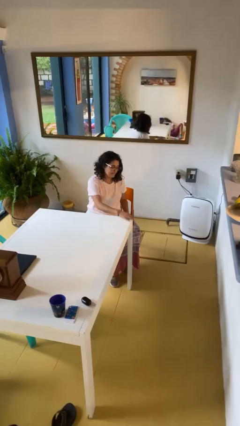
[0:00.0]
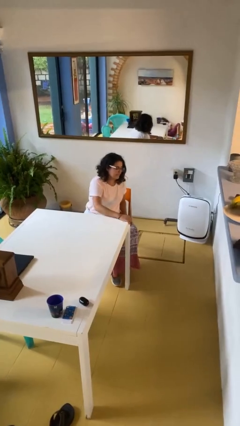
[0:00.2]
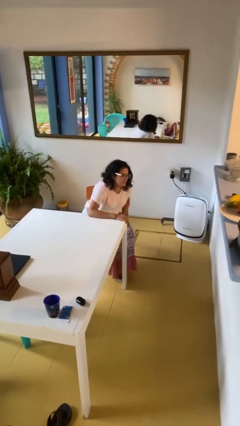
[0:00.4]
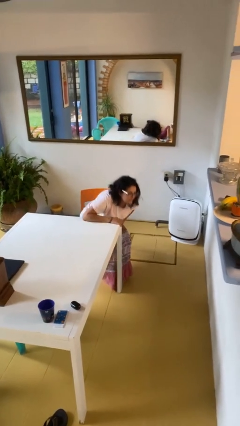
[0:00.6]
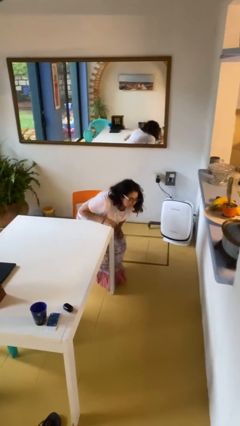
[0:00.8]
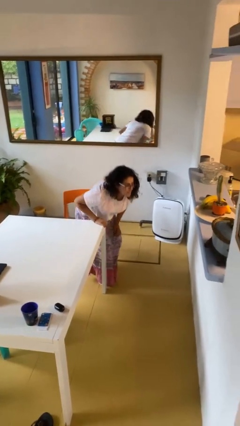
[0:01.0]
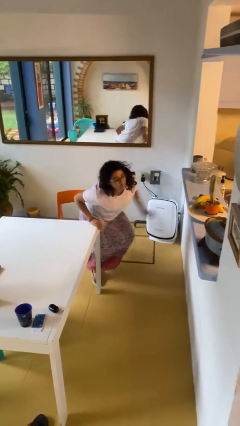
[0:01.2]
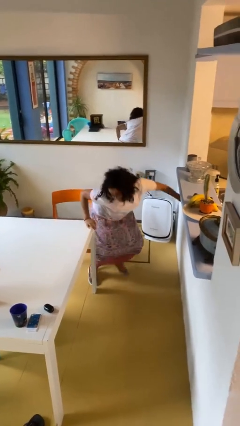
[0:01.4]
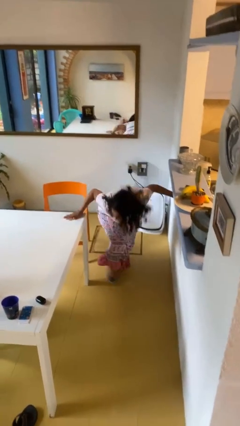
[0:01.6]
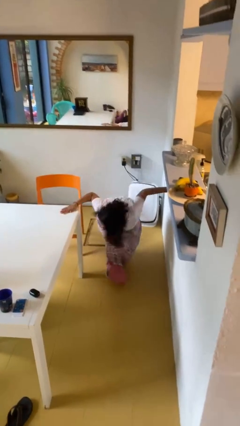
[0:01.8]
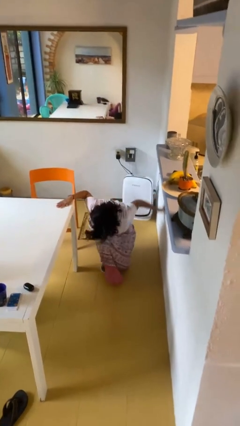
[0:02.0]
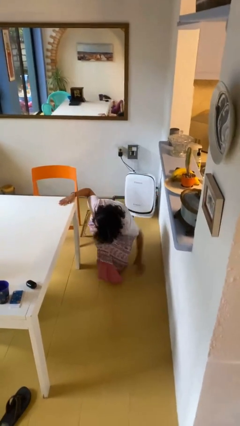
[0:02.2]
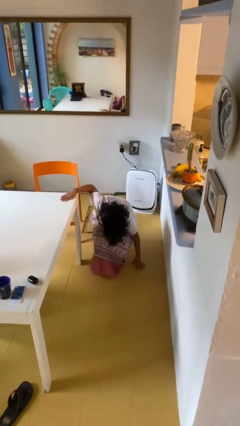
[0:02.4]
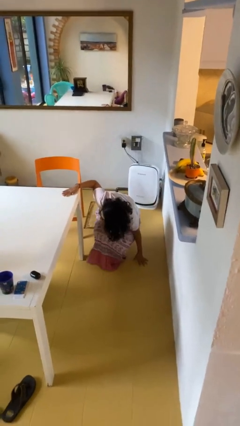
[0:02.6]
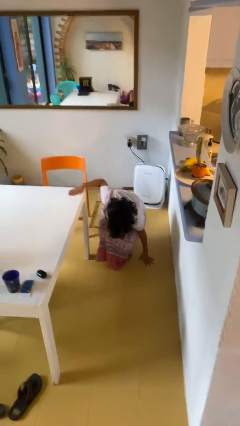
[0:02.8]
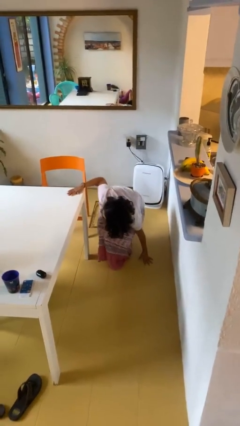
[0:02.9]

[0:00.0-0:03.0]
person falls from chair

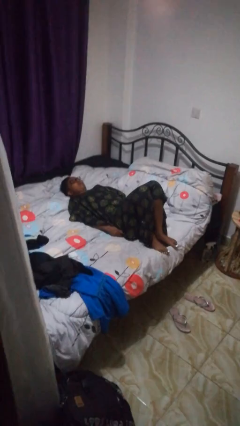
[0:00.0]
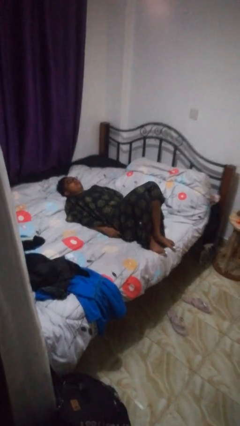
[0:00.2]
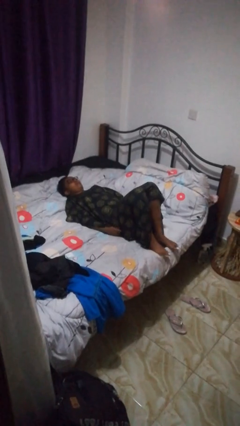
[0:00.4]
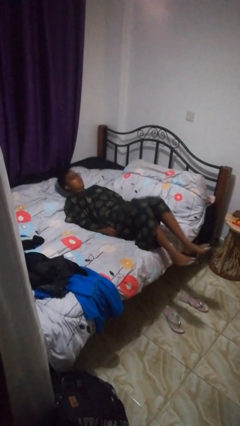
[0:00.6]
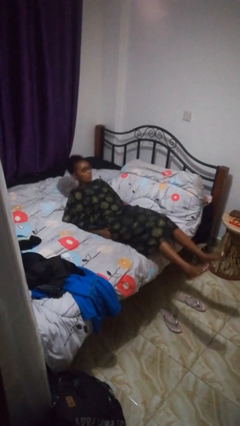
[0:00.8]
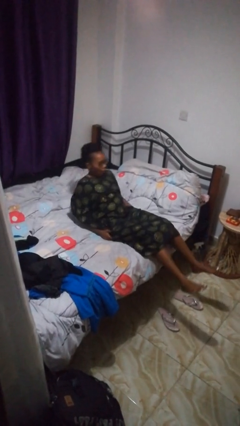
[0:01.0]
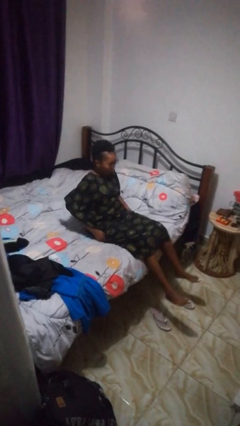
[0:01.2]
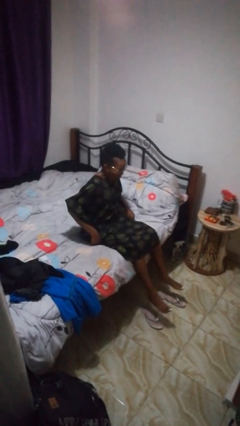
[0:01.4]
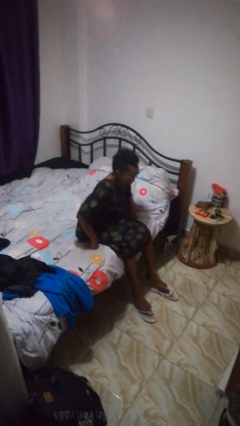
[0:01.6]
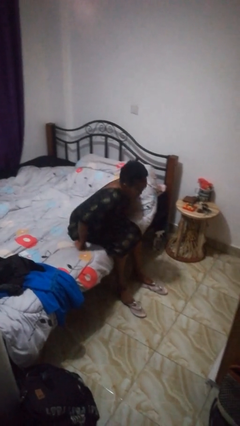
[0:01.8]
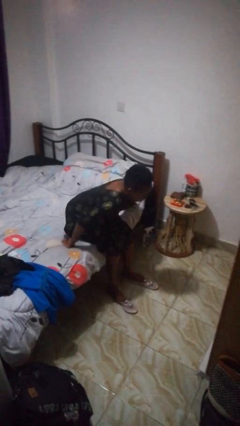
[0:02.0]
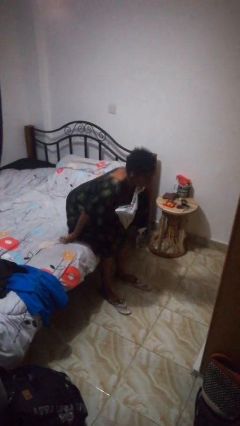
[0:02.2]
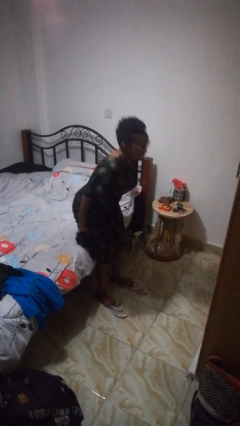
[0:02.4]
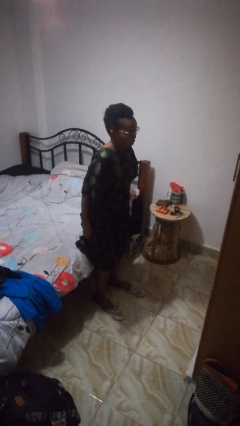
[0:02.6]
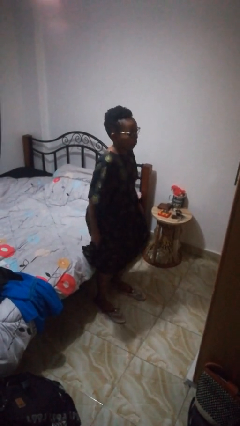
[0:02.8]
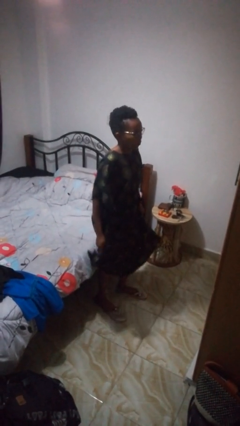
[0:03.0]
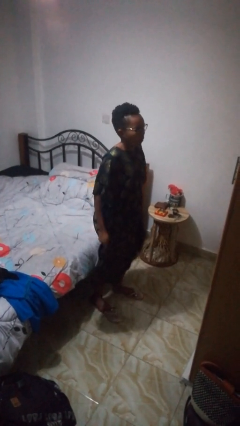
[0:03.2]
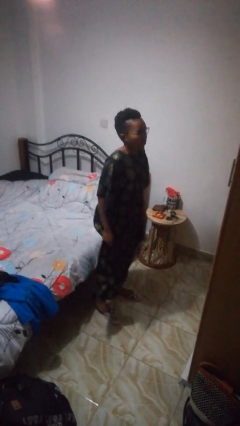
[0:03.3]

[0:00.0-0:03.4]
person stands up

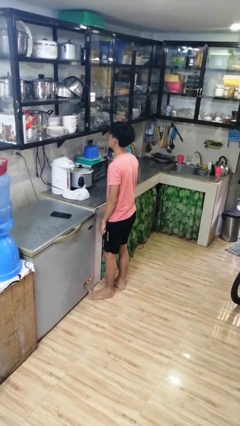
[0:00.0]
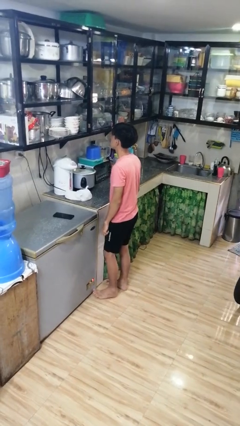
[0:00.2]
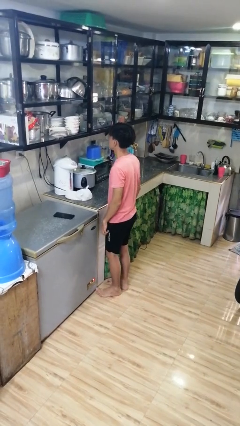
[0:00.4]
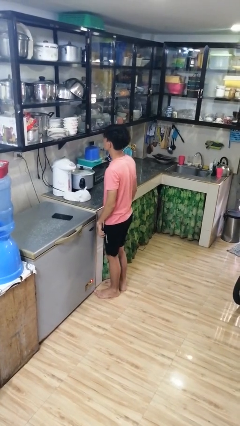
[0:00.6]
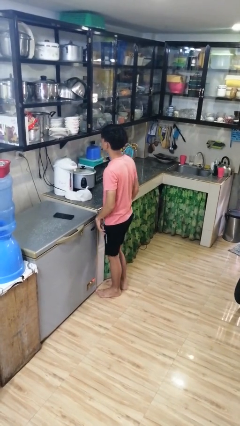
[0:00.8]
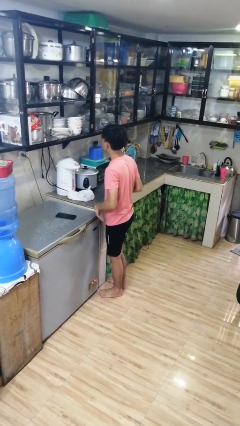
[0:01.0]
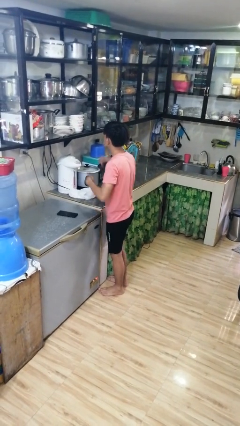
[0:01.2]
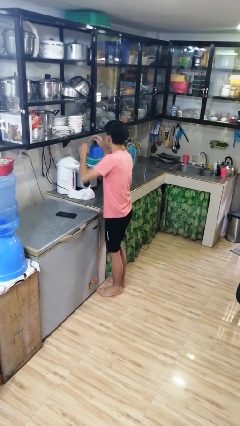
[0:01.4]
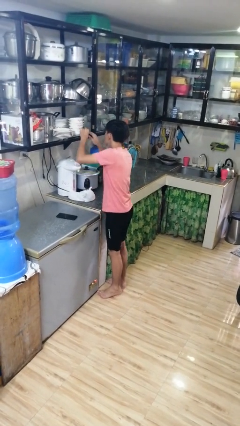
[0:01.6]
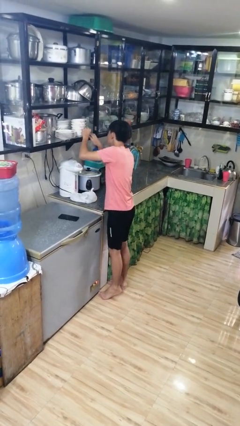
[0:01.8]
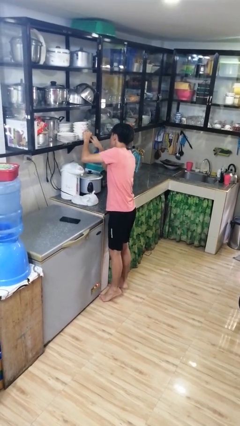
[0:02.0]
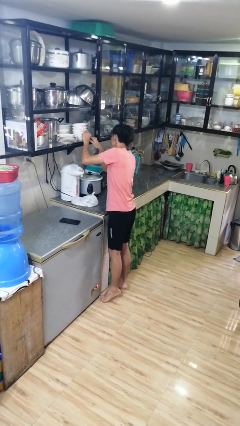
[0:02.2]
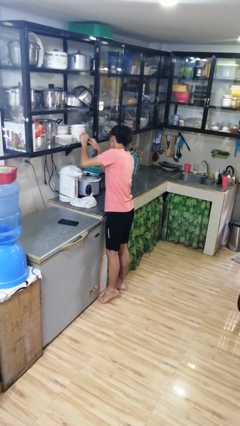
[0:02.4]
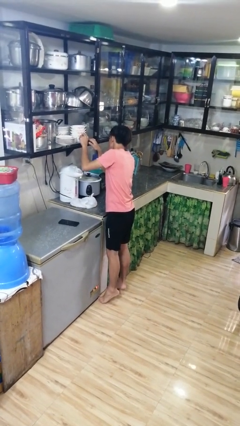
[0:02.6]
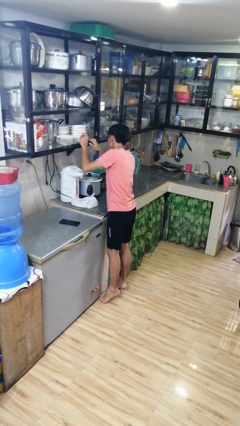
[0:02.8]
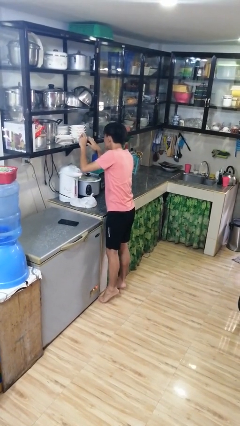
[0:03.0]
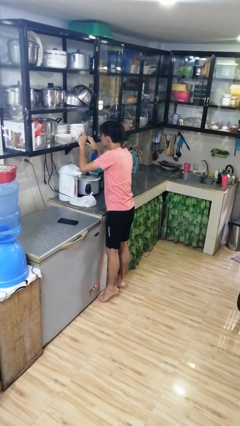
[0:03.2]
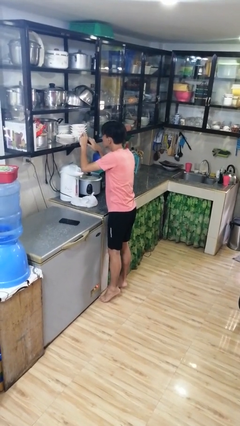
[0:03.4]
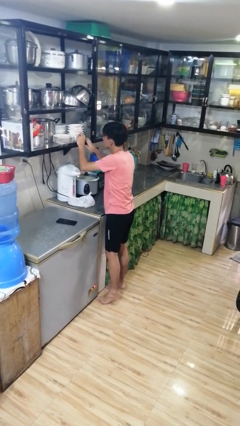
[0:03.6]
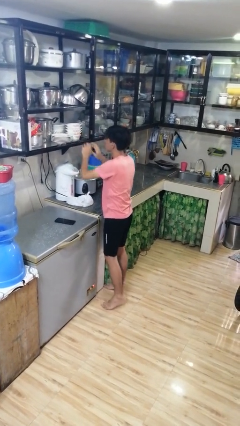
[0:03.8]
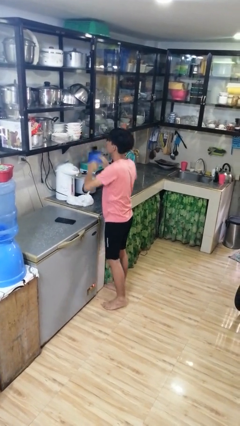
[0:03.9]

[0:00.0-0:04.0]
person puts on backpack

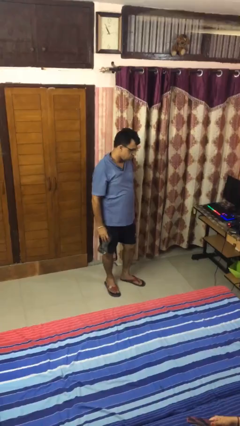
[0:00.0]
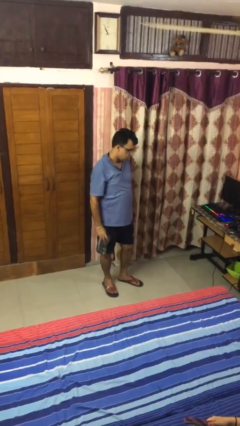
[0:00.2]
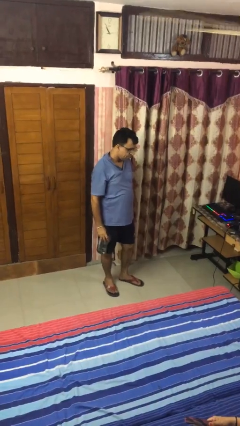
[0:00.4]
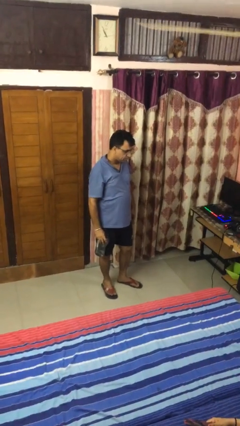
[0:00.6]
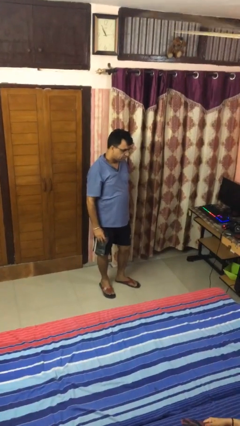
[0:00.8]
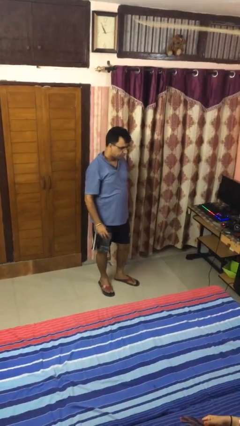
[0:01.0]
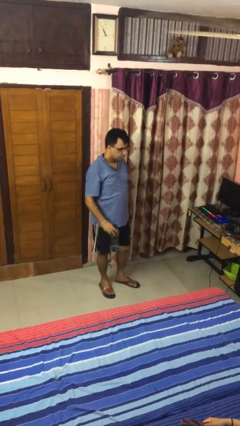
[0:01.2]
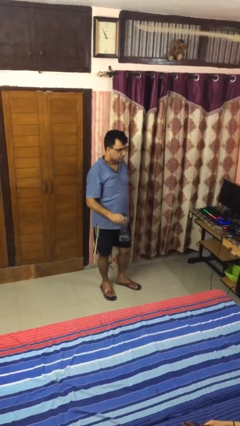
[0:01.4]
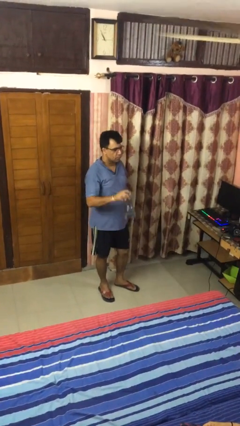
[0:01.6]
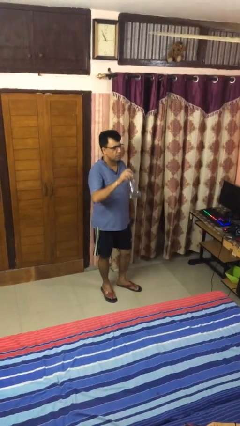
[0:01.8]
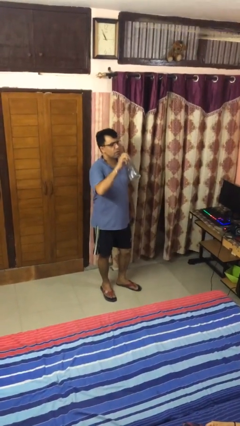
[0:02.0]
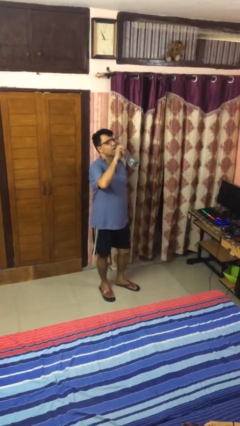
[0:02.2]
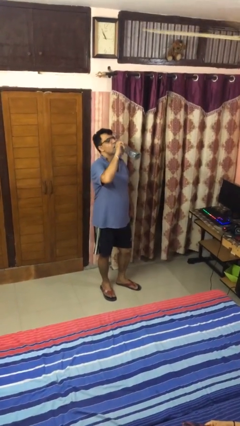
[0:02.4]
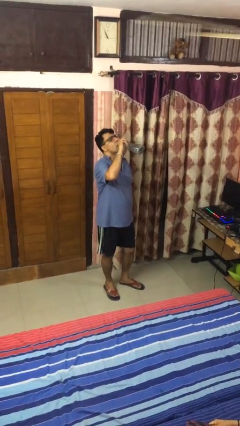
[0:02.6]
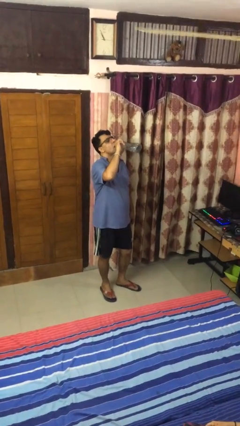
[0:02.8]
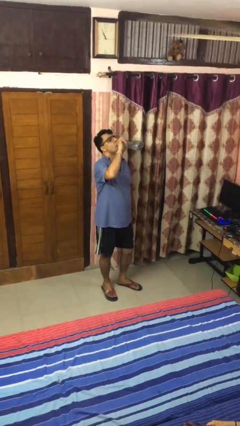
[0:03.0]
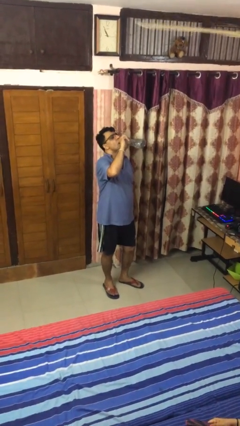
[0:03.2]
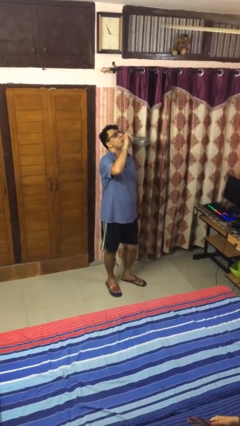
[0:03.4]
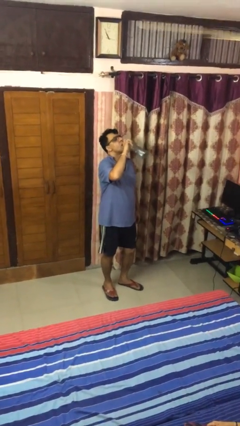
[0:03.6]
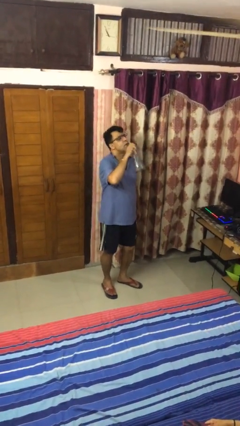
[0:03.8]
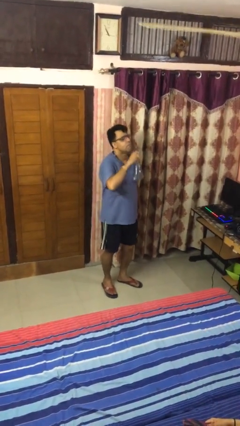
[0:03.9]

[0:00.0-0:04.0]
person drinks from bottle

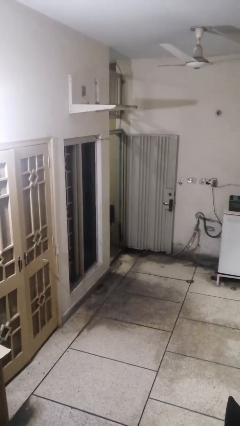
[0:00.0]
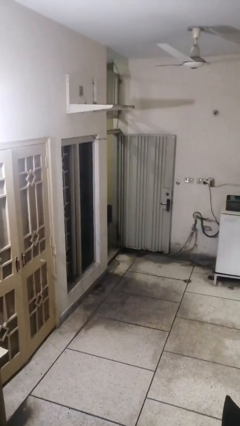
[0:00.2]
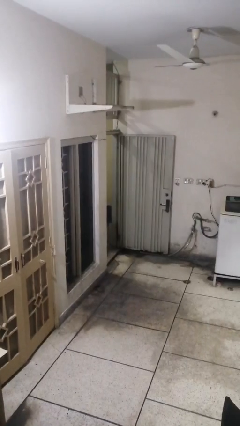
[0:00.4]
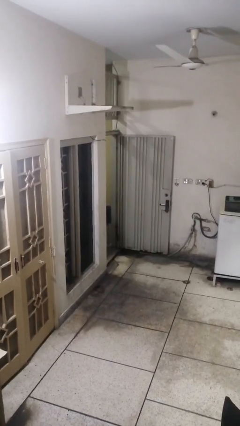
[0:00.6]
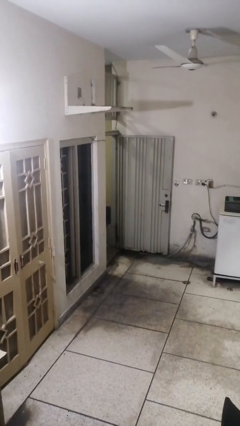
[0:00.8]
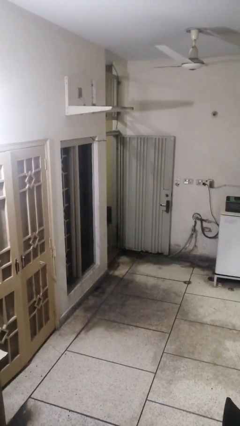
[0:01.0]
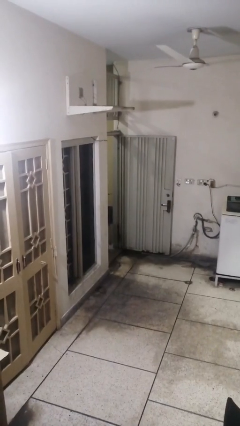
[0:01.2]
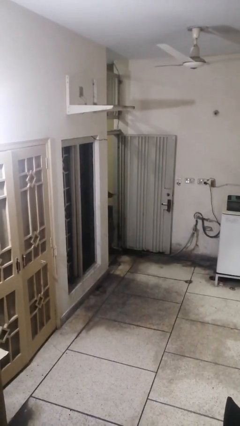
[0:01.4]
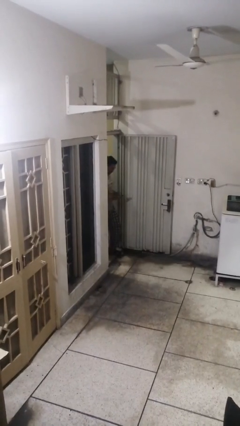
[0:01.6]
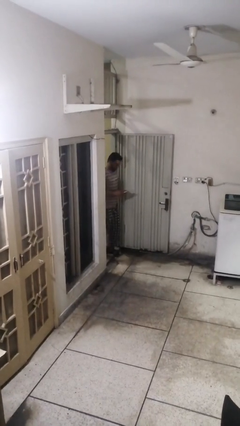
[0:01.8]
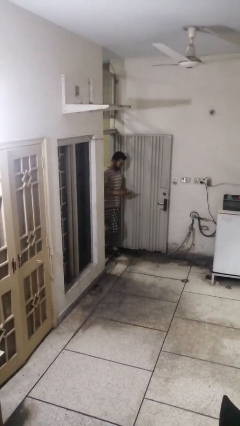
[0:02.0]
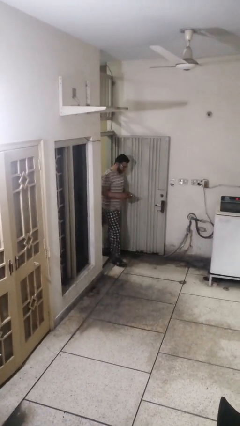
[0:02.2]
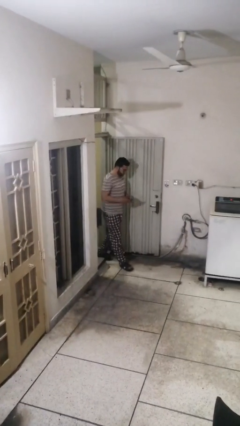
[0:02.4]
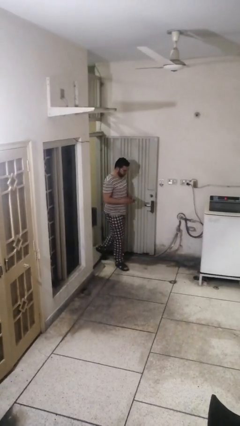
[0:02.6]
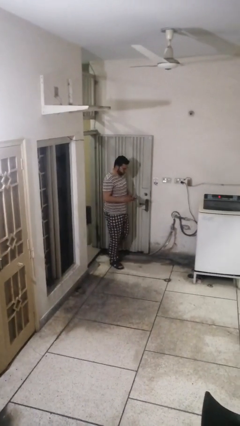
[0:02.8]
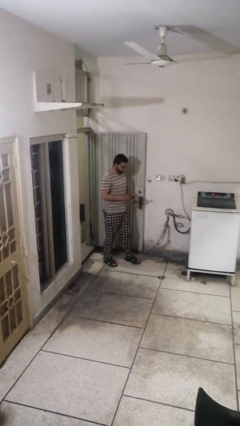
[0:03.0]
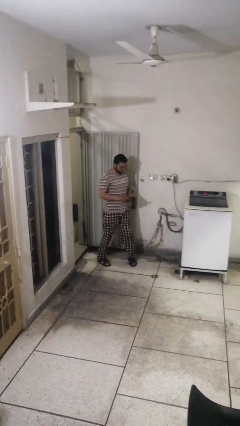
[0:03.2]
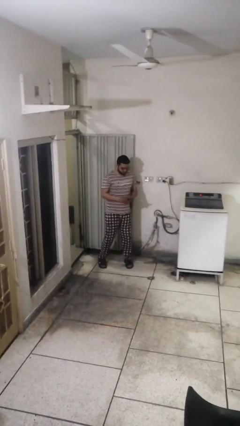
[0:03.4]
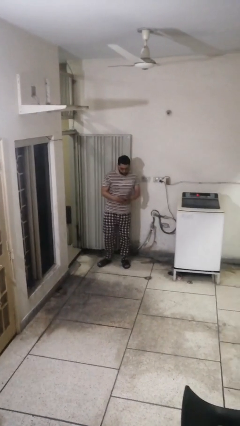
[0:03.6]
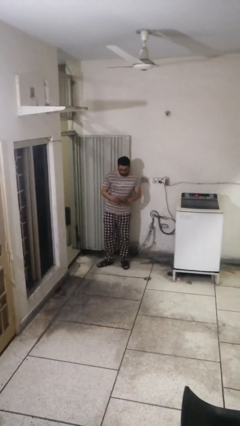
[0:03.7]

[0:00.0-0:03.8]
person enters scene through structure
